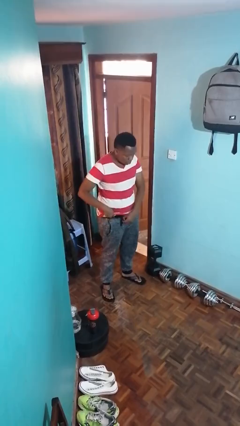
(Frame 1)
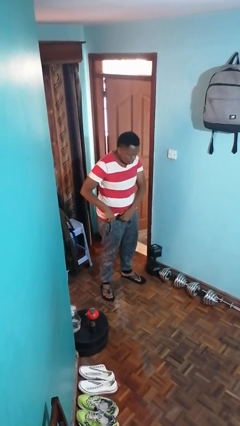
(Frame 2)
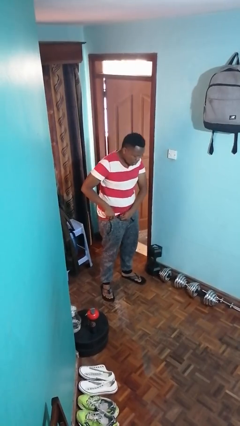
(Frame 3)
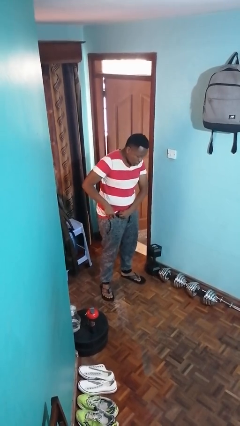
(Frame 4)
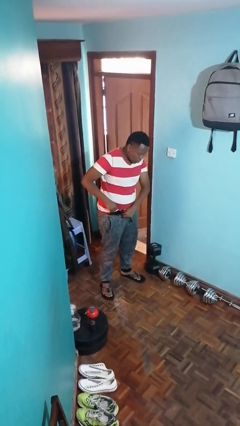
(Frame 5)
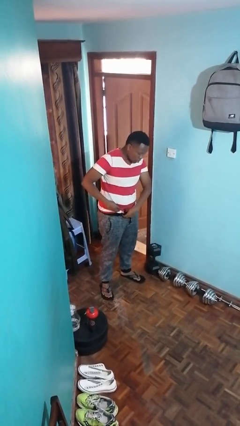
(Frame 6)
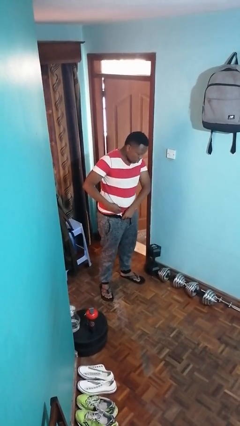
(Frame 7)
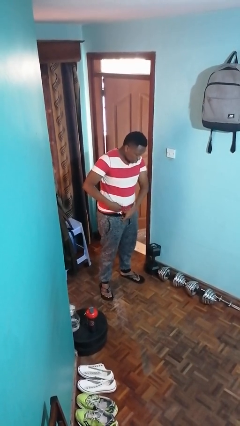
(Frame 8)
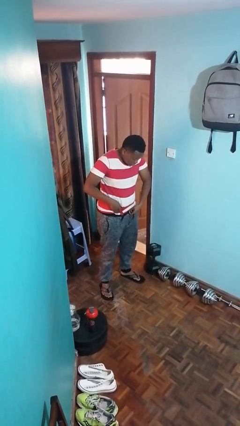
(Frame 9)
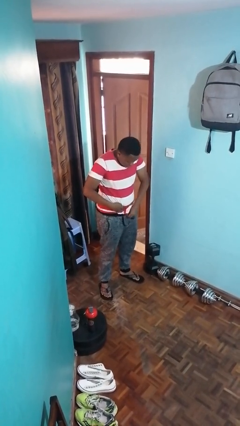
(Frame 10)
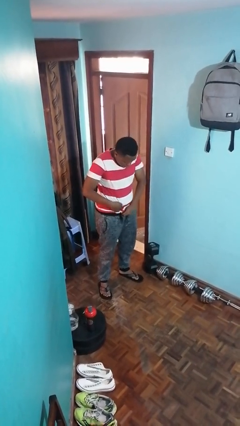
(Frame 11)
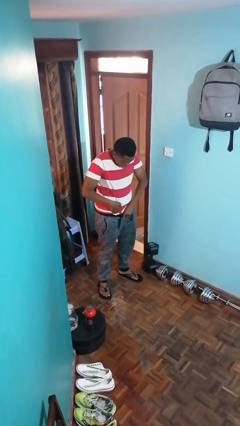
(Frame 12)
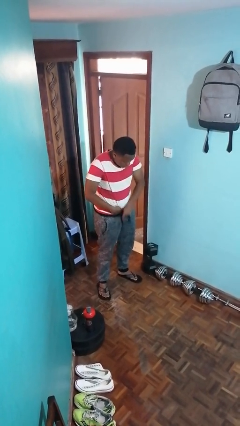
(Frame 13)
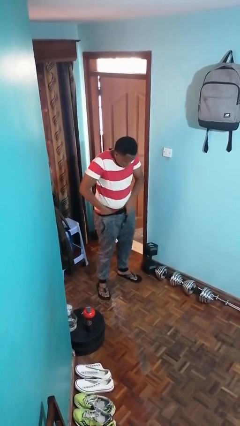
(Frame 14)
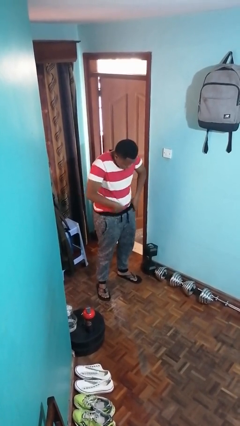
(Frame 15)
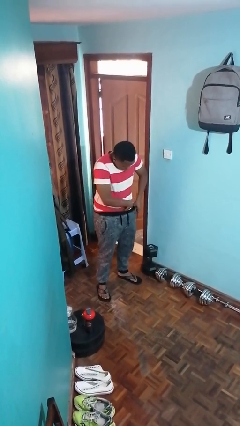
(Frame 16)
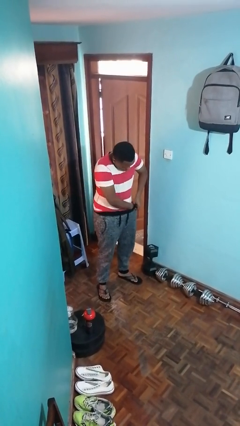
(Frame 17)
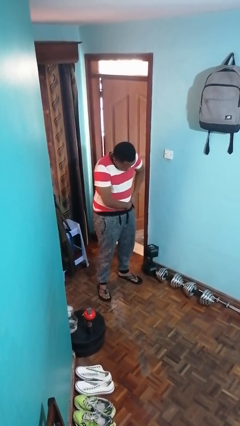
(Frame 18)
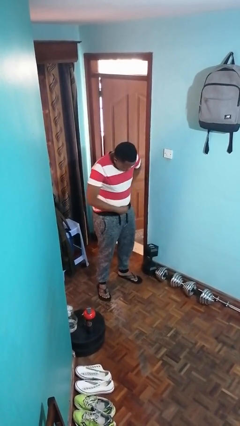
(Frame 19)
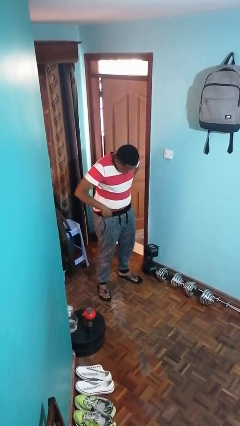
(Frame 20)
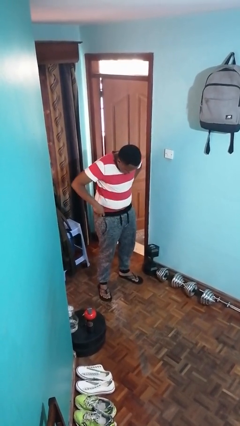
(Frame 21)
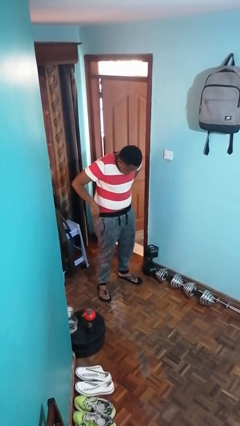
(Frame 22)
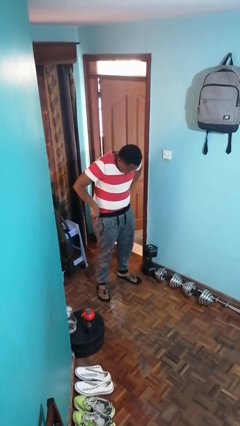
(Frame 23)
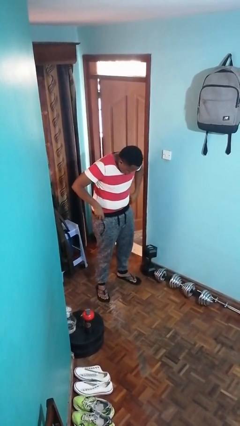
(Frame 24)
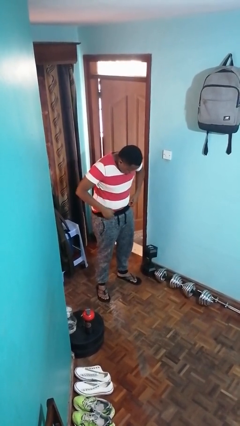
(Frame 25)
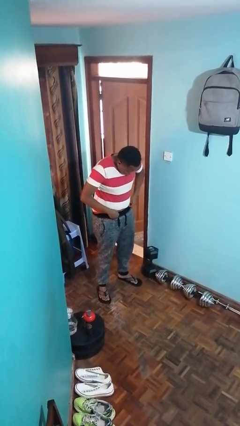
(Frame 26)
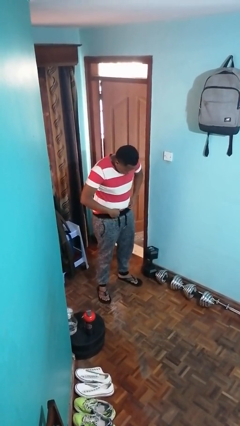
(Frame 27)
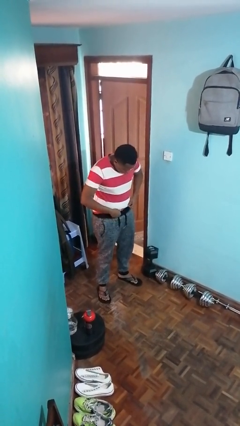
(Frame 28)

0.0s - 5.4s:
person tucks in shirt

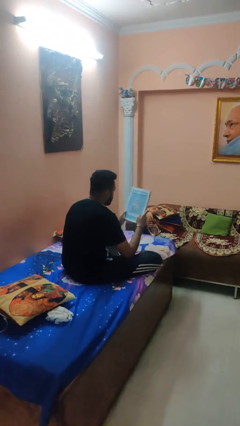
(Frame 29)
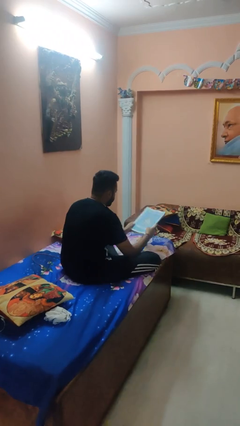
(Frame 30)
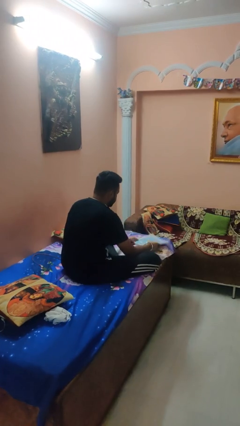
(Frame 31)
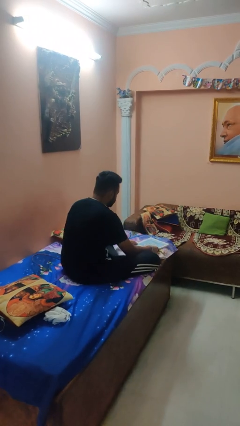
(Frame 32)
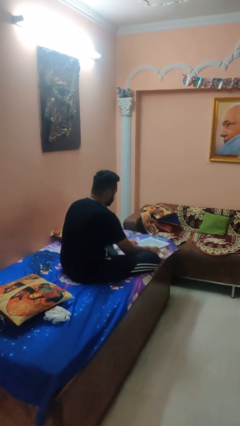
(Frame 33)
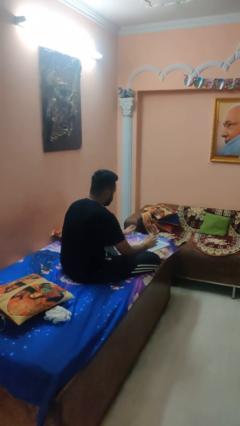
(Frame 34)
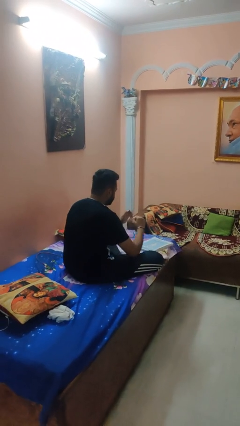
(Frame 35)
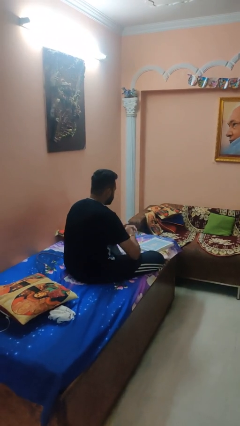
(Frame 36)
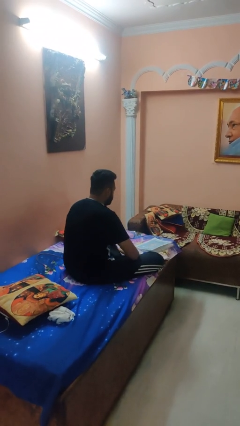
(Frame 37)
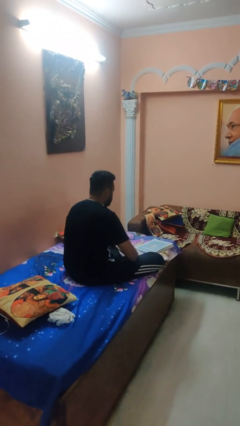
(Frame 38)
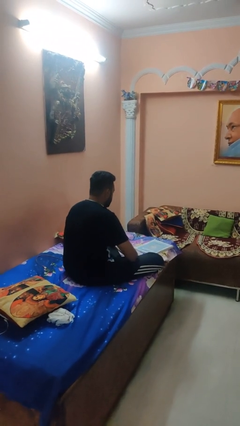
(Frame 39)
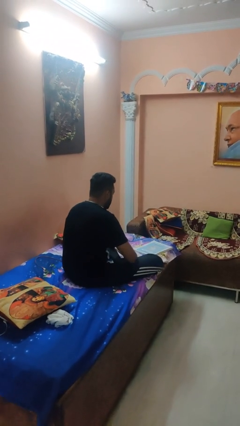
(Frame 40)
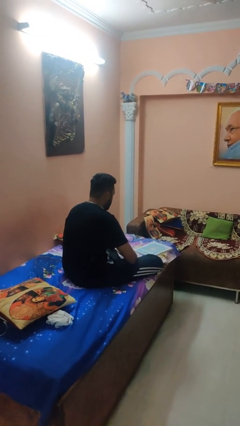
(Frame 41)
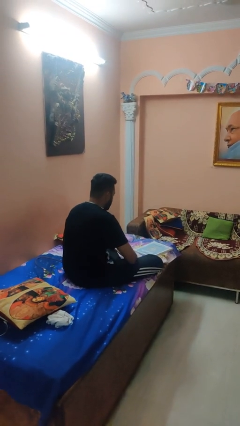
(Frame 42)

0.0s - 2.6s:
person puts down object on bed

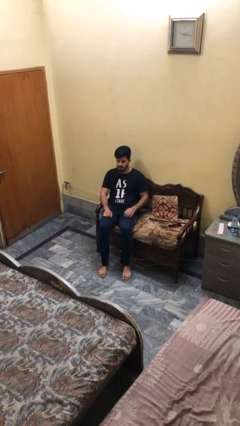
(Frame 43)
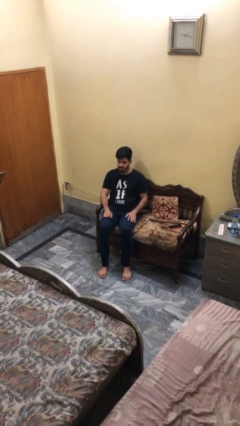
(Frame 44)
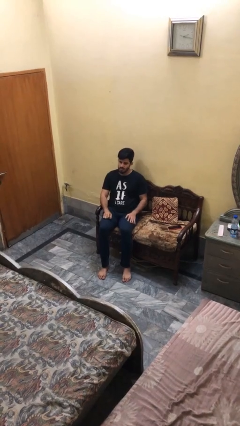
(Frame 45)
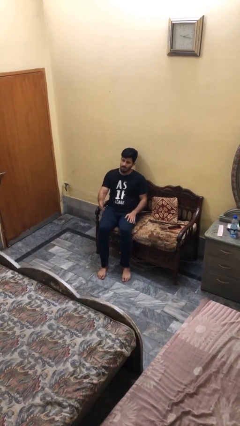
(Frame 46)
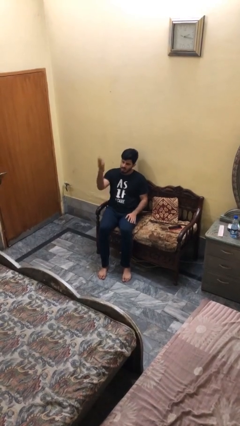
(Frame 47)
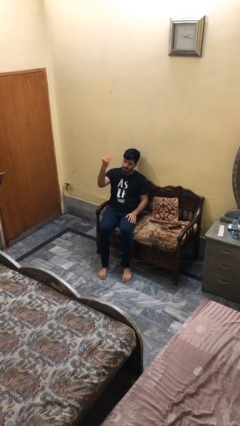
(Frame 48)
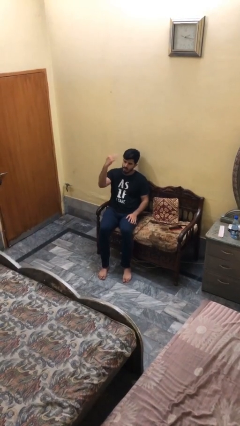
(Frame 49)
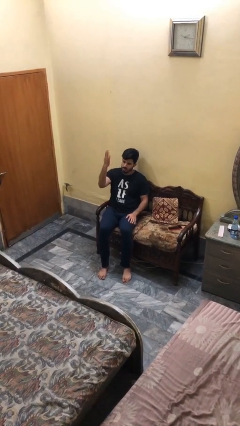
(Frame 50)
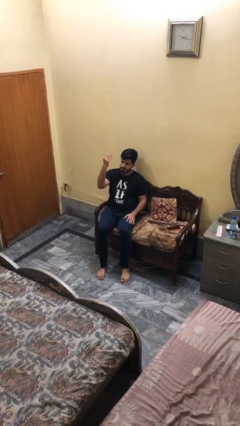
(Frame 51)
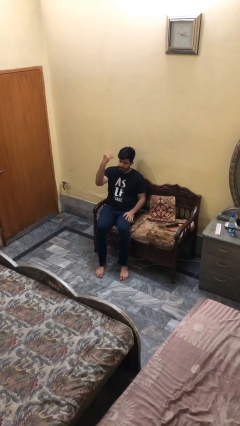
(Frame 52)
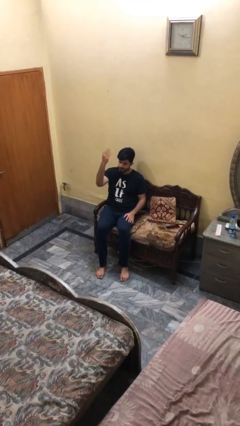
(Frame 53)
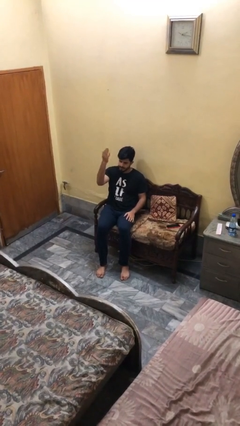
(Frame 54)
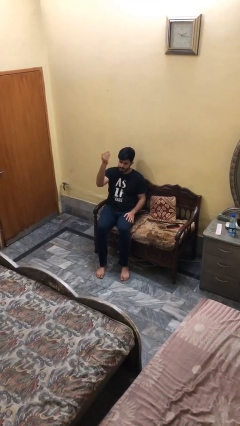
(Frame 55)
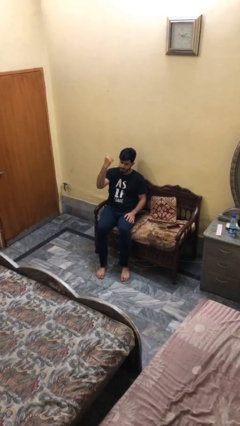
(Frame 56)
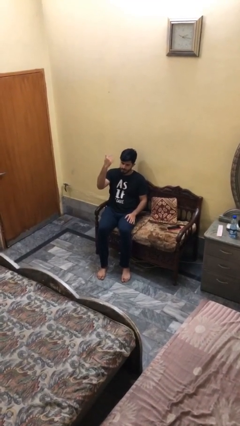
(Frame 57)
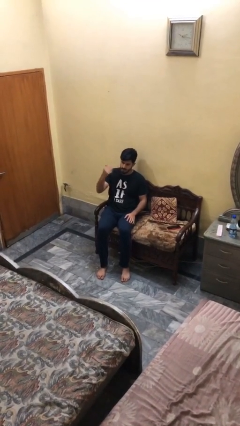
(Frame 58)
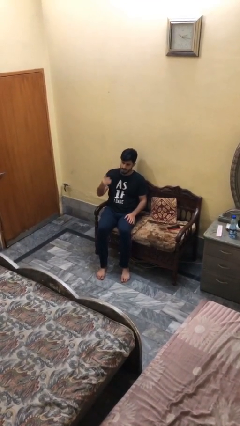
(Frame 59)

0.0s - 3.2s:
person gestures come here

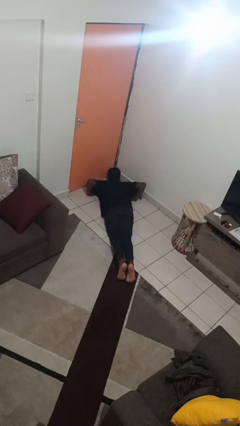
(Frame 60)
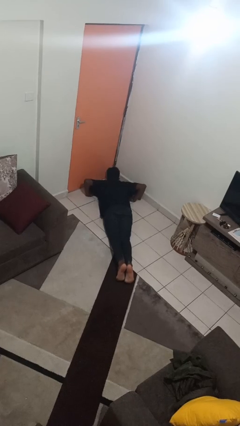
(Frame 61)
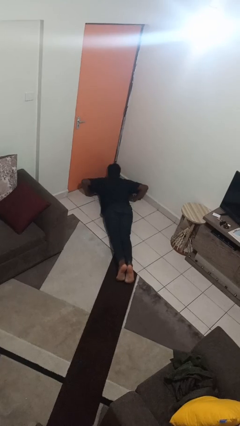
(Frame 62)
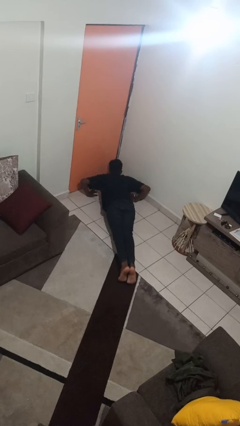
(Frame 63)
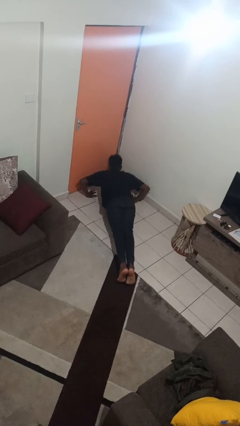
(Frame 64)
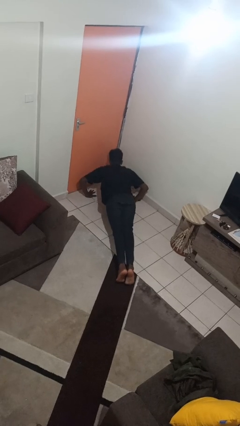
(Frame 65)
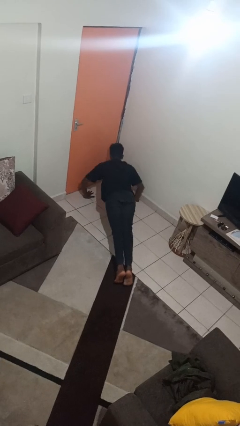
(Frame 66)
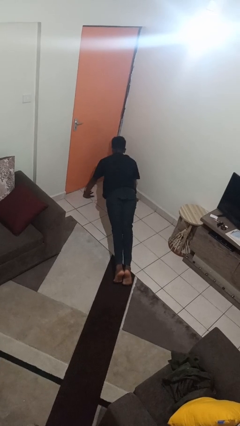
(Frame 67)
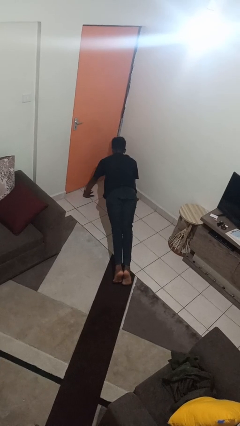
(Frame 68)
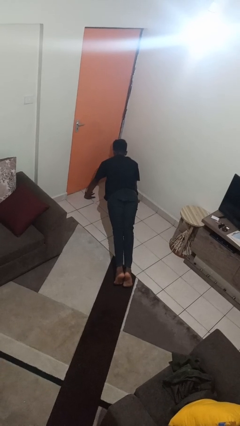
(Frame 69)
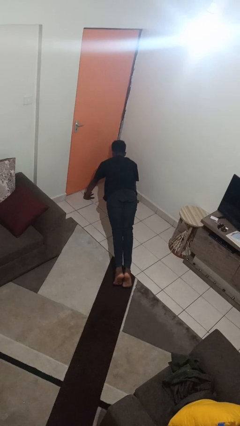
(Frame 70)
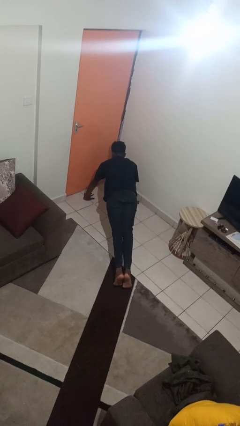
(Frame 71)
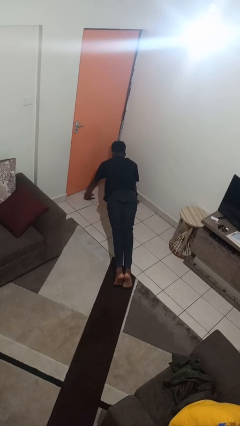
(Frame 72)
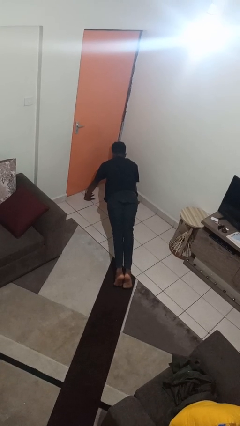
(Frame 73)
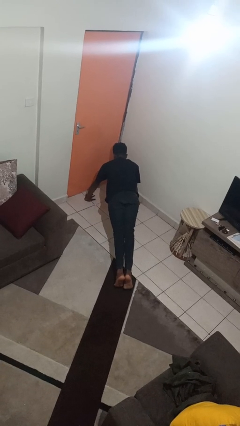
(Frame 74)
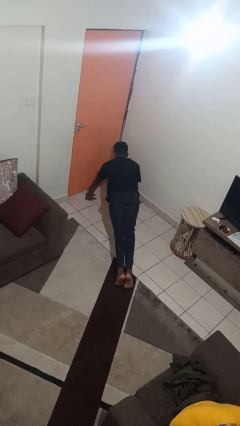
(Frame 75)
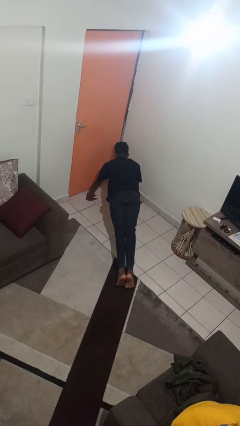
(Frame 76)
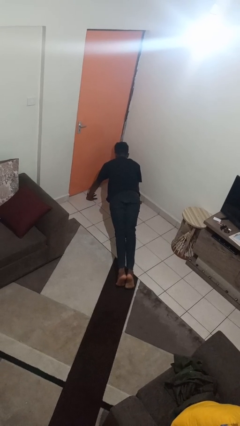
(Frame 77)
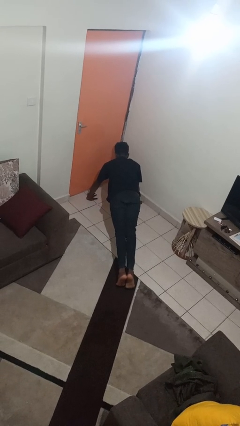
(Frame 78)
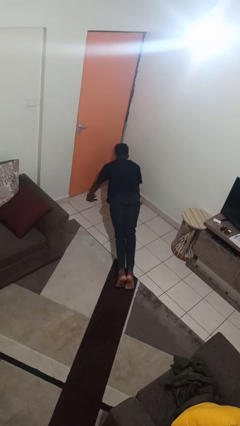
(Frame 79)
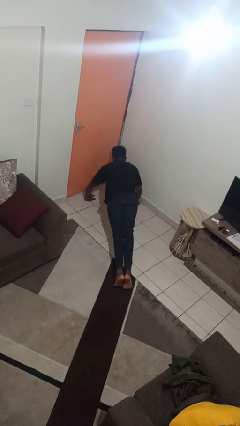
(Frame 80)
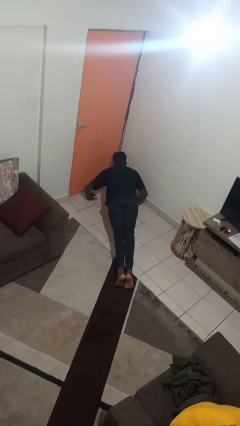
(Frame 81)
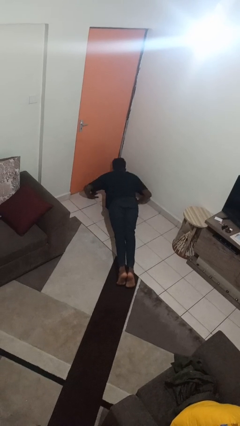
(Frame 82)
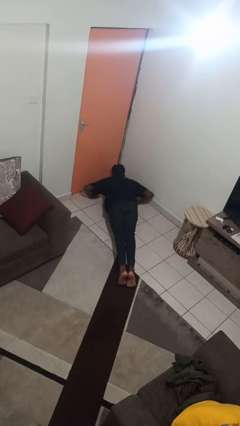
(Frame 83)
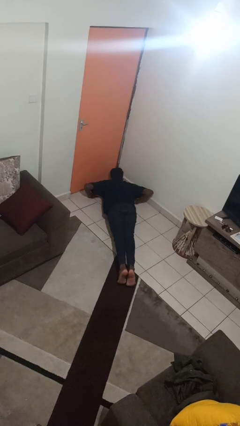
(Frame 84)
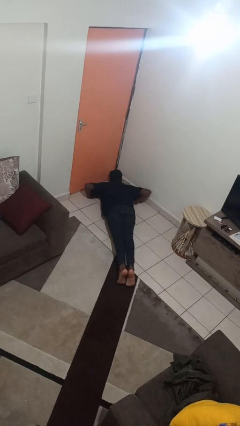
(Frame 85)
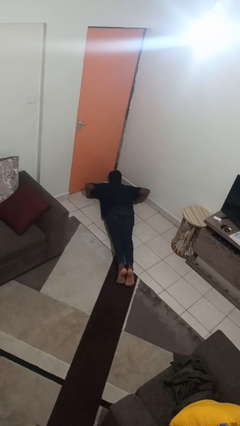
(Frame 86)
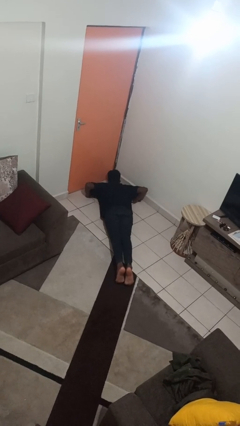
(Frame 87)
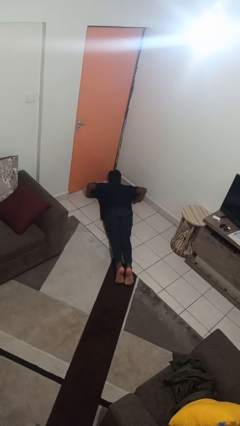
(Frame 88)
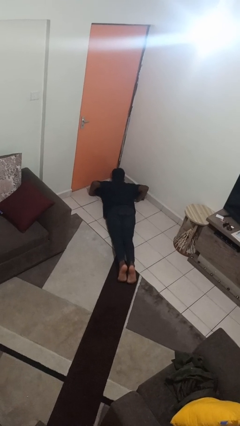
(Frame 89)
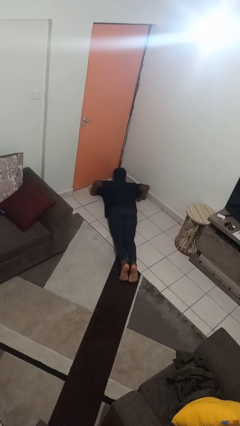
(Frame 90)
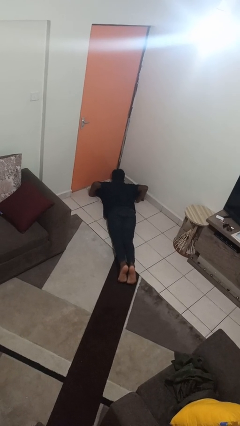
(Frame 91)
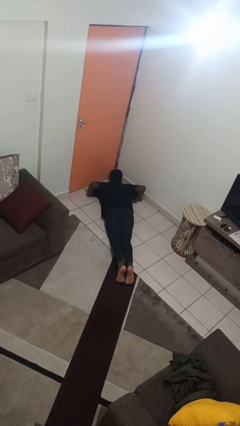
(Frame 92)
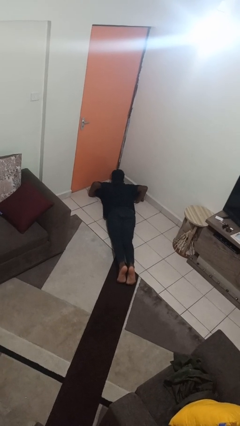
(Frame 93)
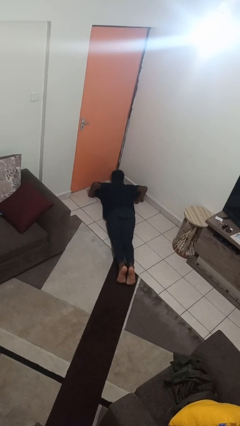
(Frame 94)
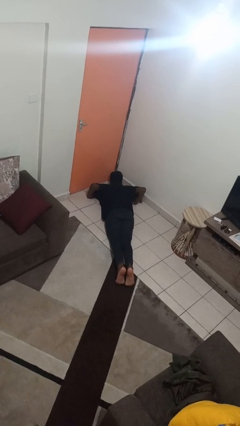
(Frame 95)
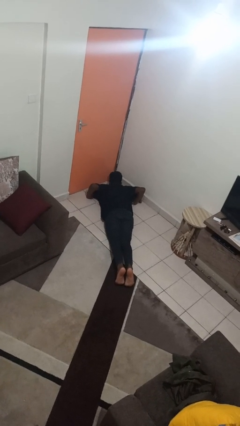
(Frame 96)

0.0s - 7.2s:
person exercises with pushup
